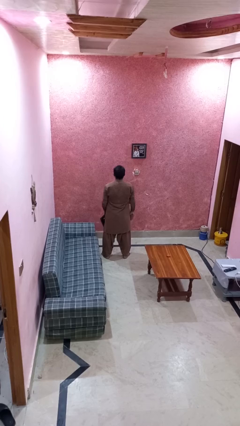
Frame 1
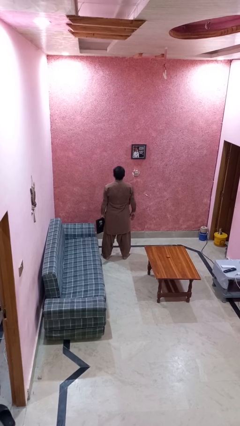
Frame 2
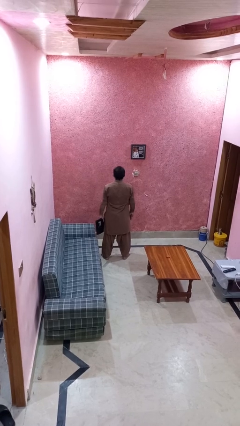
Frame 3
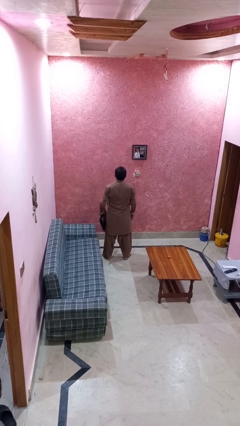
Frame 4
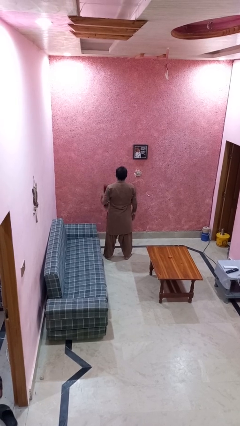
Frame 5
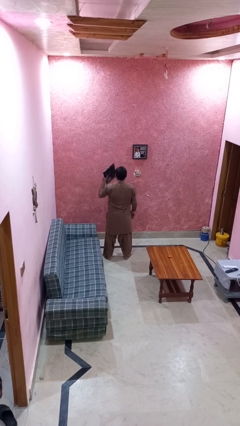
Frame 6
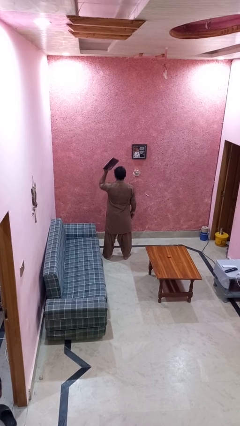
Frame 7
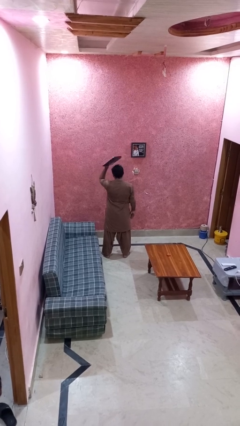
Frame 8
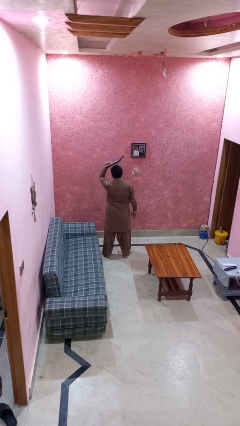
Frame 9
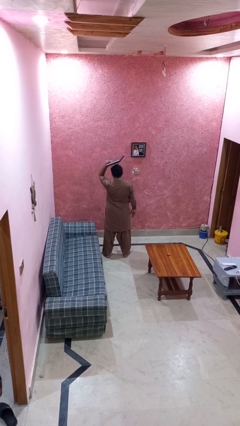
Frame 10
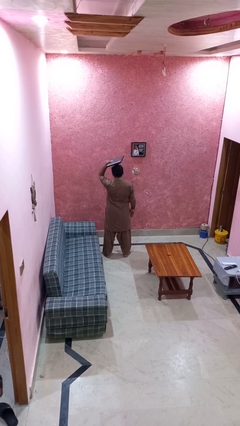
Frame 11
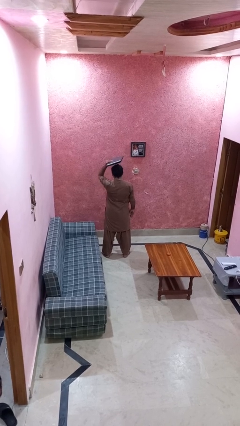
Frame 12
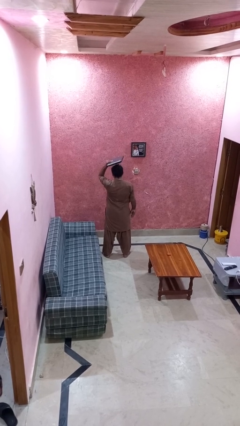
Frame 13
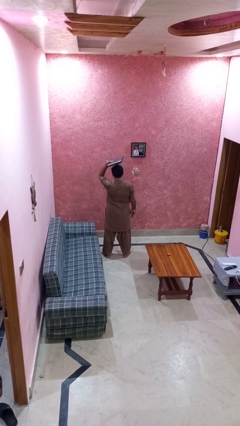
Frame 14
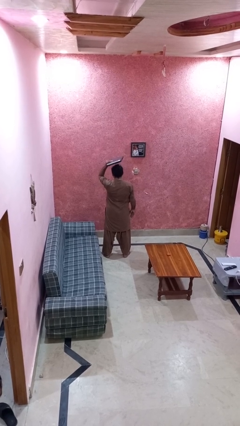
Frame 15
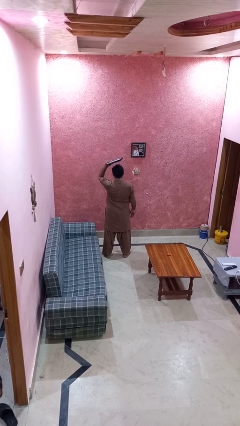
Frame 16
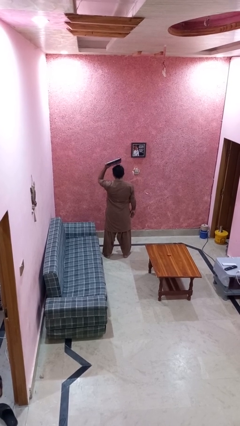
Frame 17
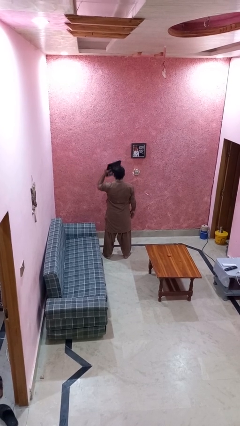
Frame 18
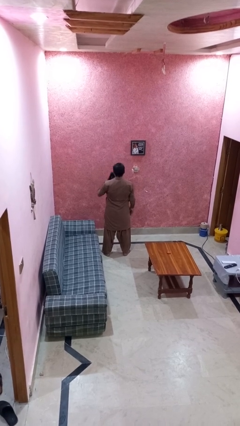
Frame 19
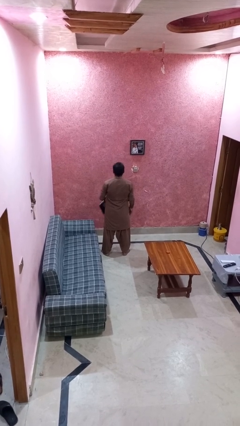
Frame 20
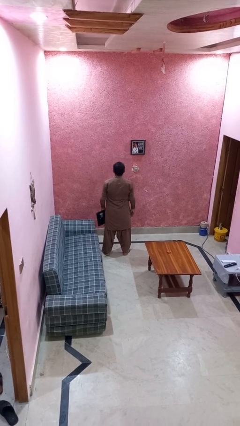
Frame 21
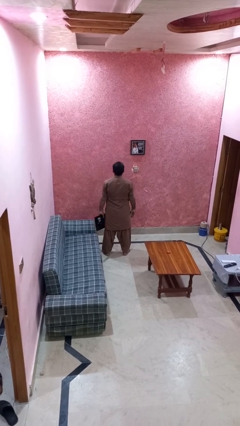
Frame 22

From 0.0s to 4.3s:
person holds object above head

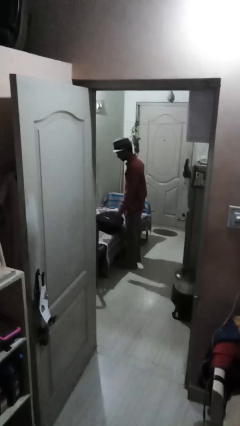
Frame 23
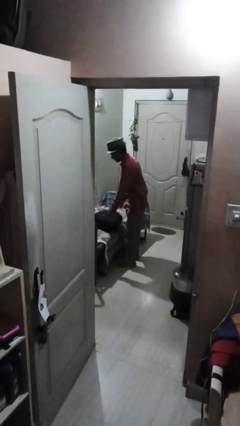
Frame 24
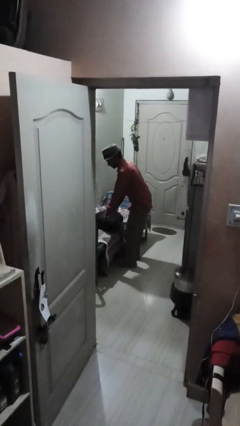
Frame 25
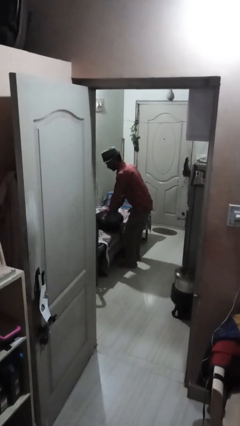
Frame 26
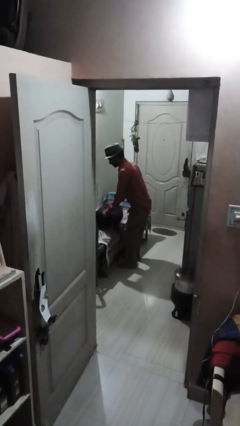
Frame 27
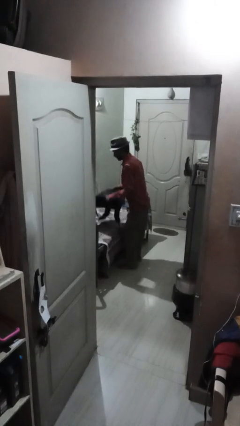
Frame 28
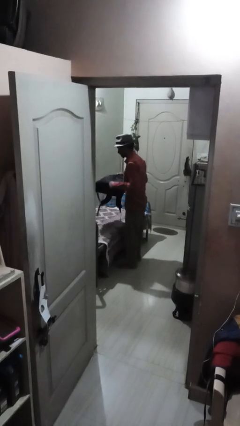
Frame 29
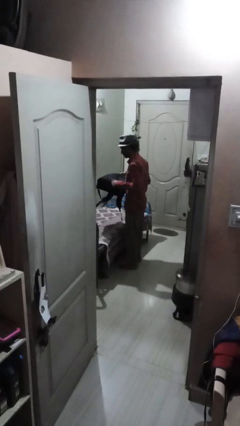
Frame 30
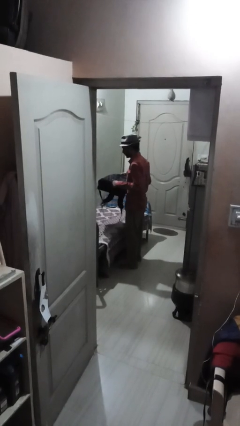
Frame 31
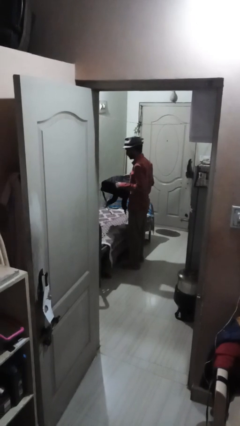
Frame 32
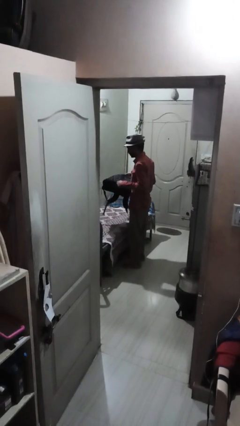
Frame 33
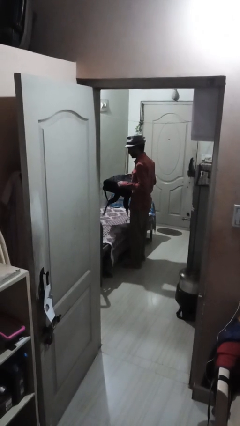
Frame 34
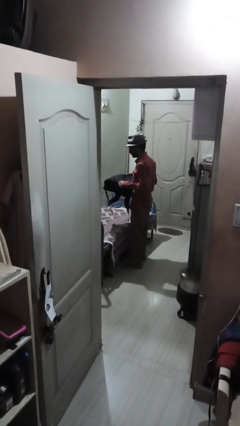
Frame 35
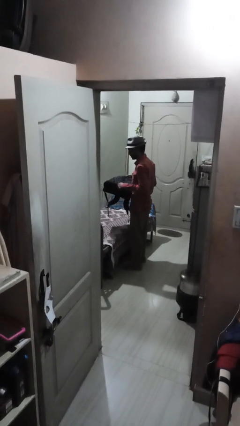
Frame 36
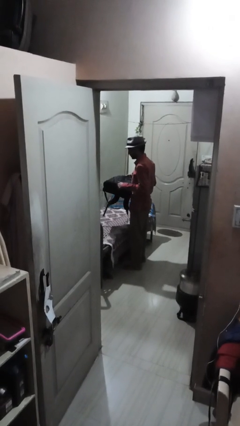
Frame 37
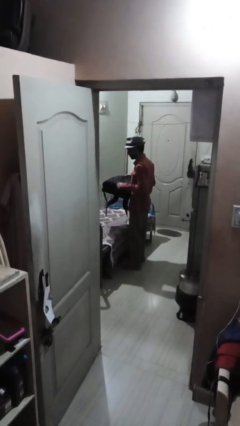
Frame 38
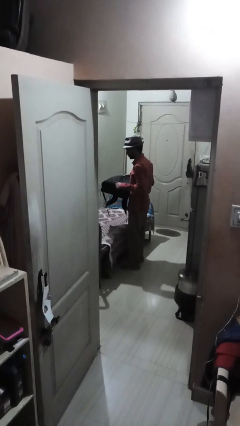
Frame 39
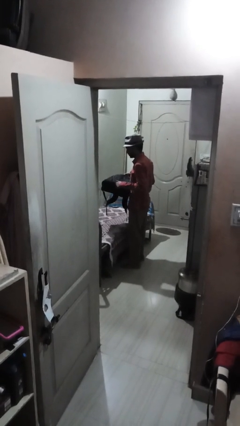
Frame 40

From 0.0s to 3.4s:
person picks up object from couch

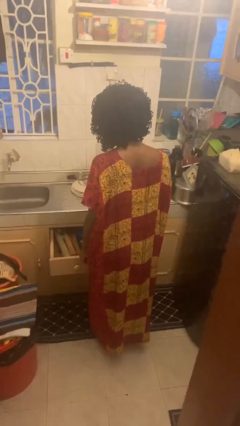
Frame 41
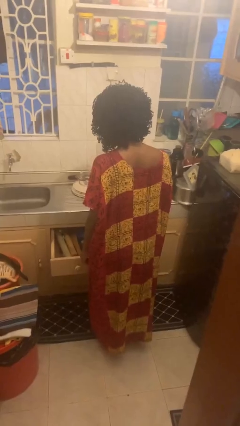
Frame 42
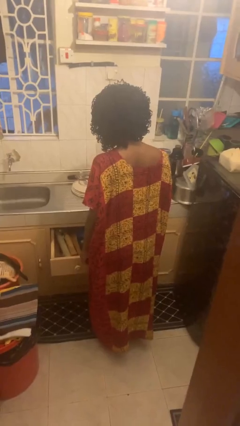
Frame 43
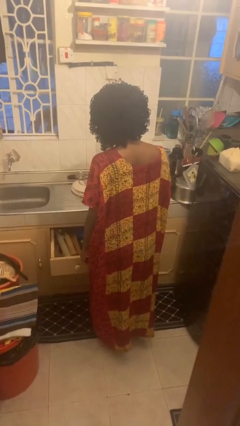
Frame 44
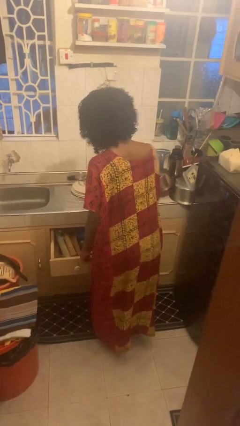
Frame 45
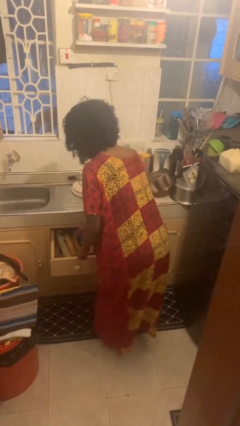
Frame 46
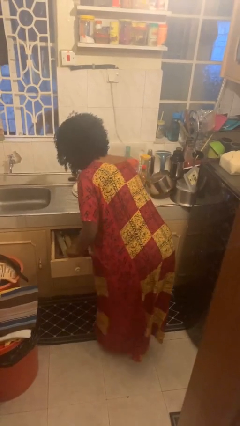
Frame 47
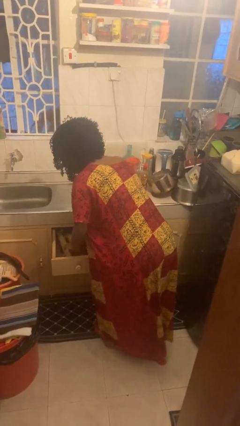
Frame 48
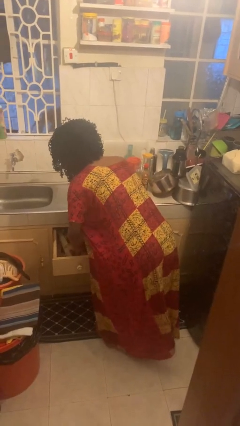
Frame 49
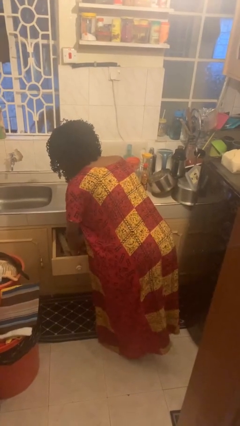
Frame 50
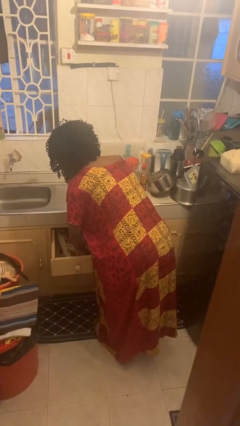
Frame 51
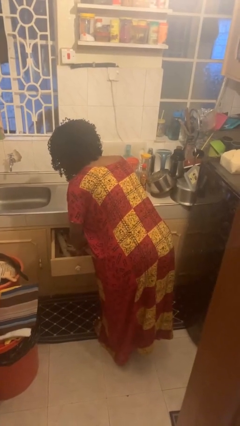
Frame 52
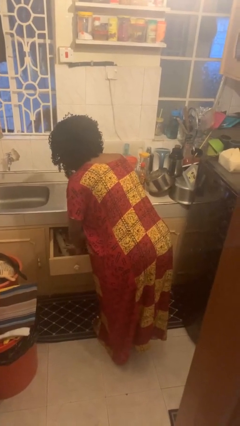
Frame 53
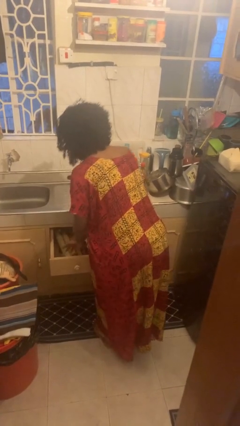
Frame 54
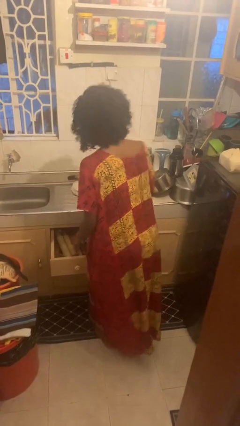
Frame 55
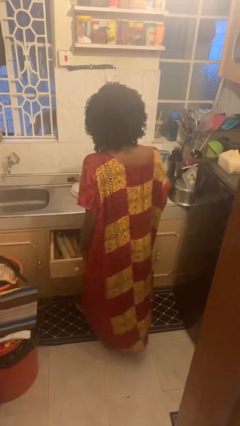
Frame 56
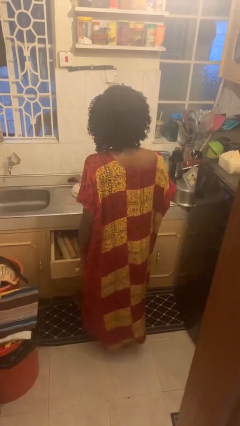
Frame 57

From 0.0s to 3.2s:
person searches in kitchen drawer

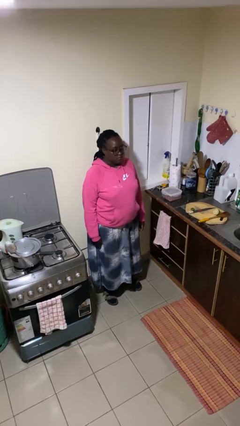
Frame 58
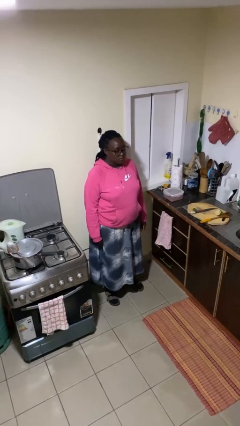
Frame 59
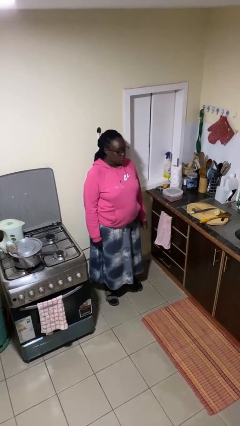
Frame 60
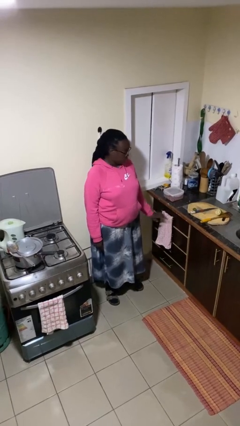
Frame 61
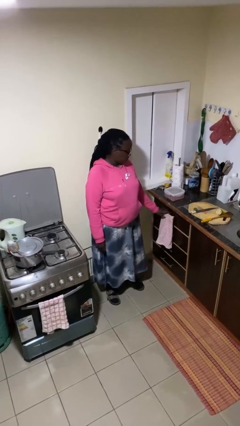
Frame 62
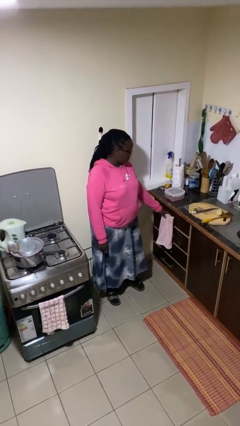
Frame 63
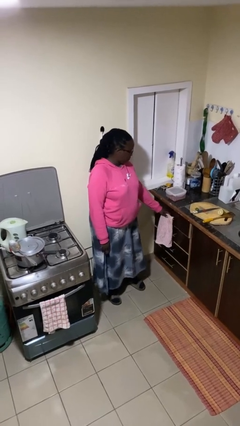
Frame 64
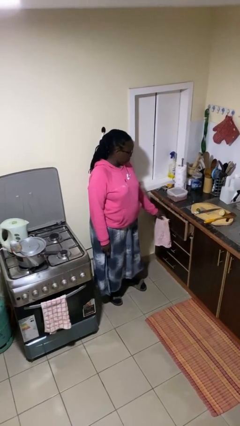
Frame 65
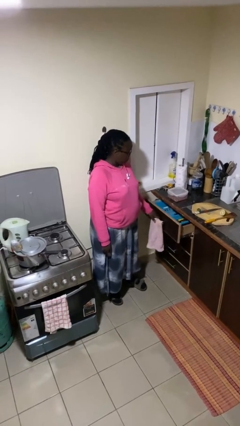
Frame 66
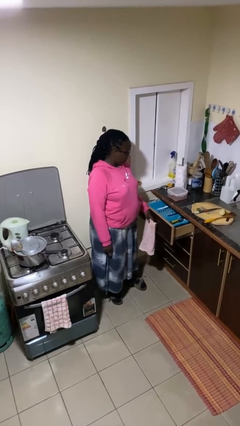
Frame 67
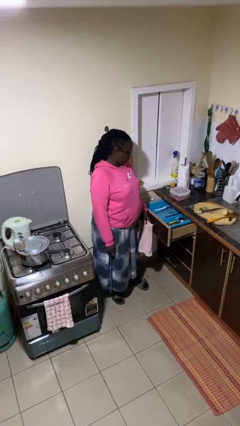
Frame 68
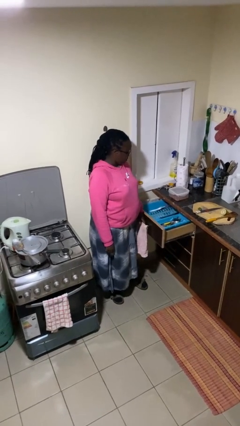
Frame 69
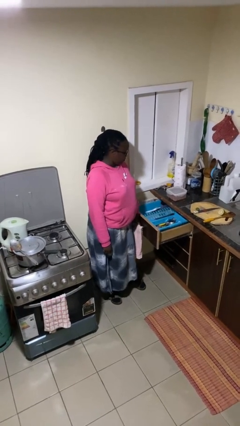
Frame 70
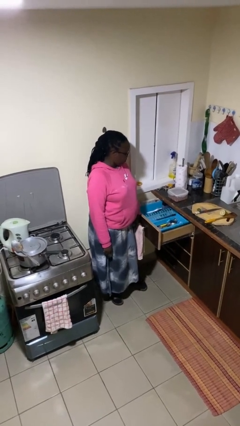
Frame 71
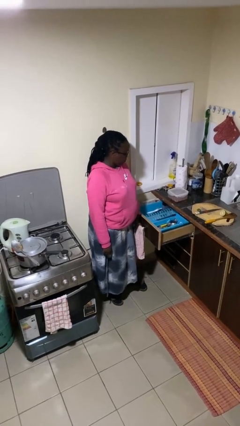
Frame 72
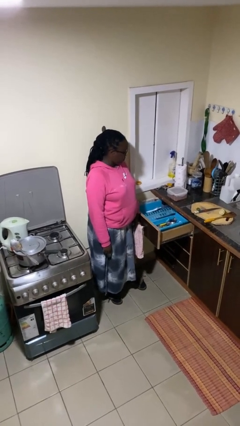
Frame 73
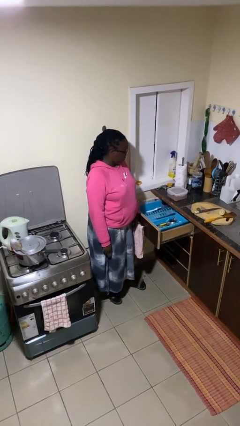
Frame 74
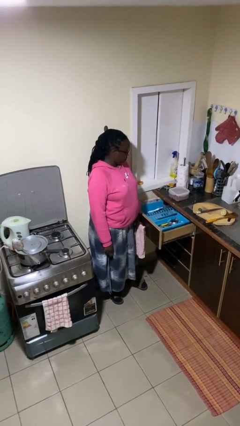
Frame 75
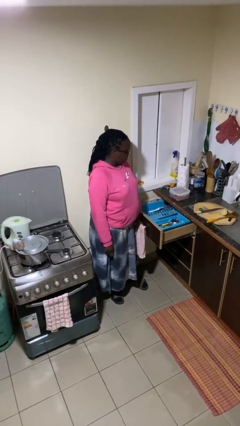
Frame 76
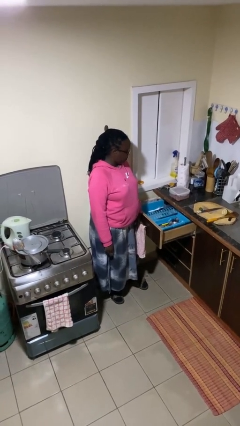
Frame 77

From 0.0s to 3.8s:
person opens kitchen drawer

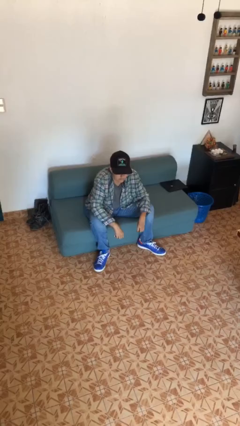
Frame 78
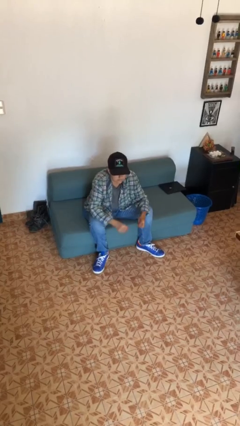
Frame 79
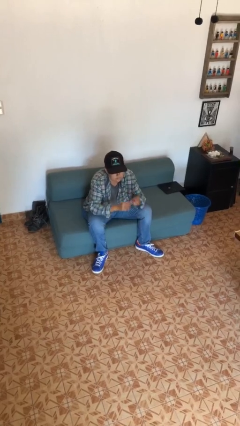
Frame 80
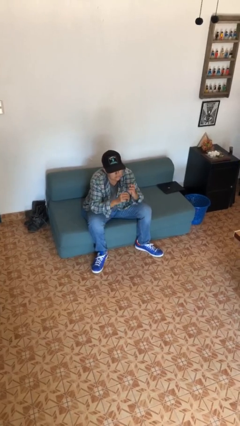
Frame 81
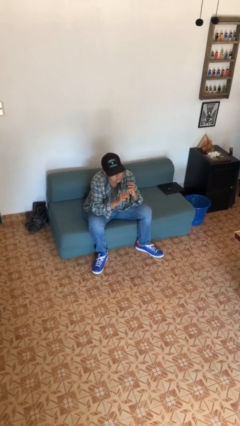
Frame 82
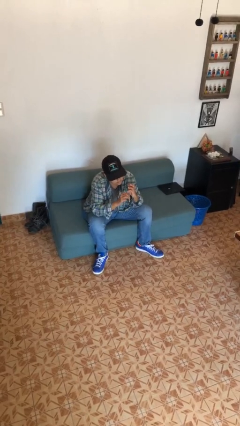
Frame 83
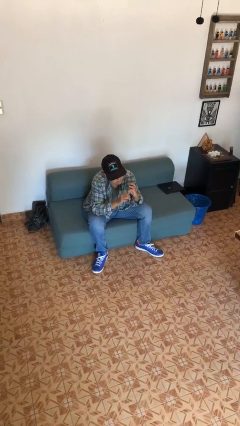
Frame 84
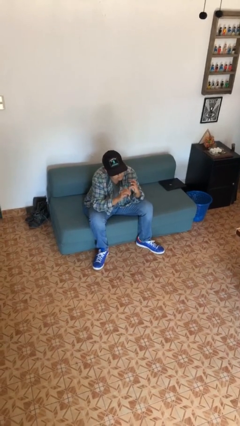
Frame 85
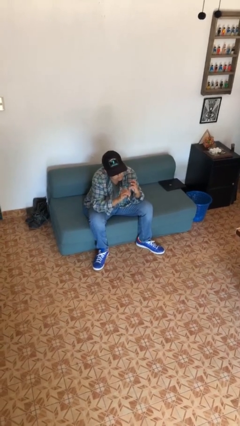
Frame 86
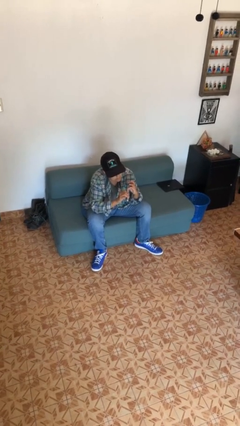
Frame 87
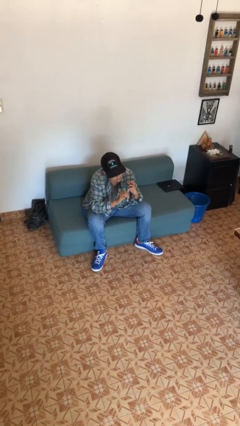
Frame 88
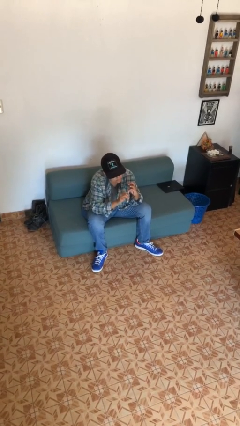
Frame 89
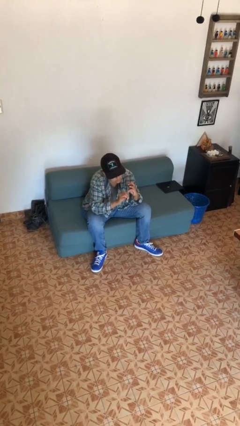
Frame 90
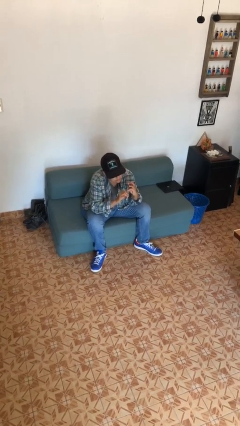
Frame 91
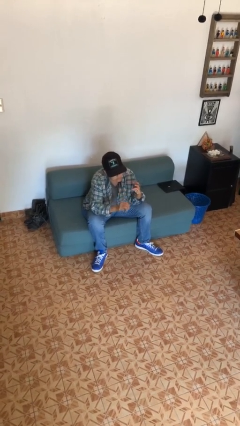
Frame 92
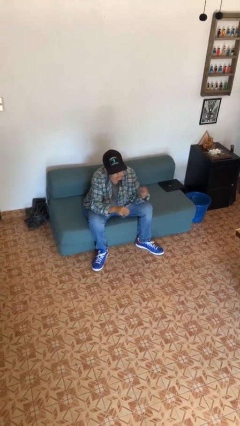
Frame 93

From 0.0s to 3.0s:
person files fingernails
